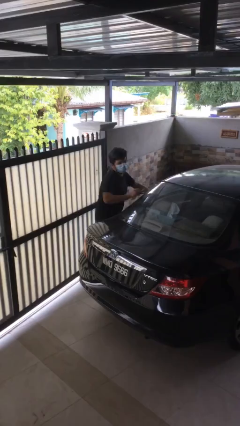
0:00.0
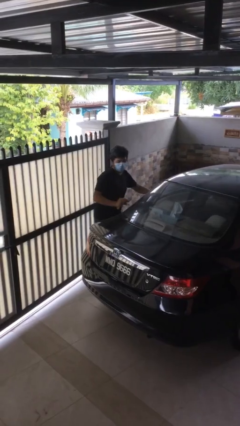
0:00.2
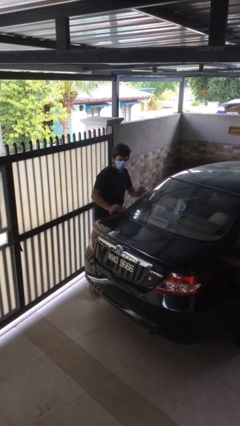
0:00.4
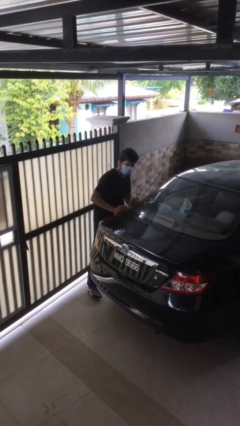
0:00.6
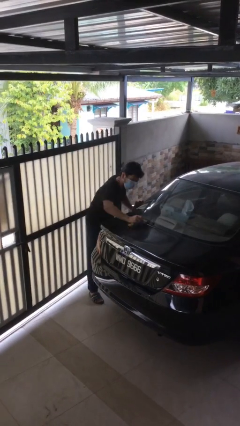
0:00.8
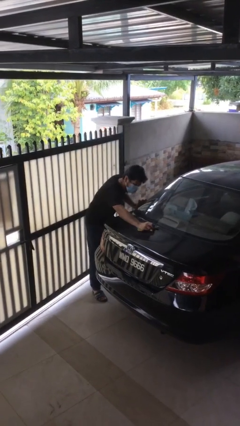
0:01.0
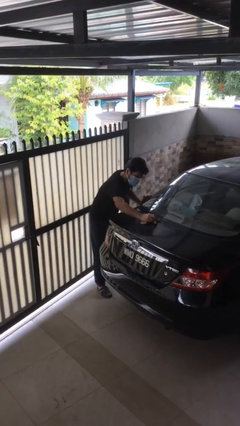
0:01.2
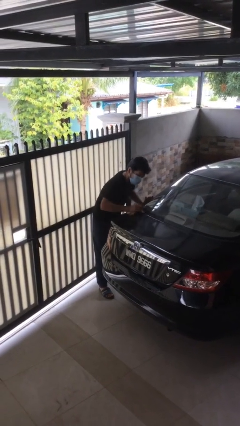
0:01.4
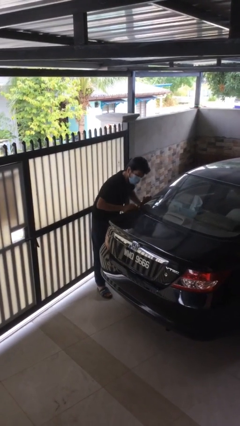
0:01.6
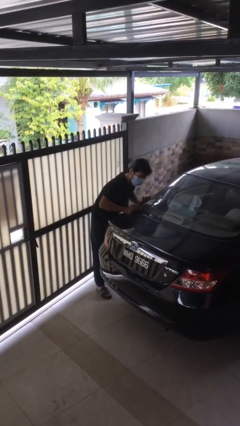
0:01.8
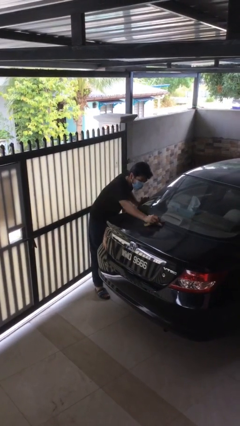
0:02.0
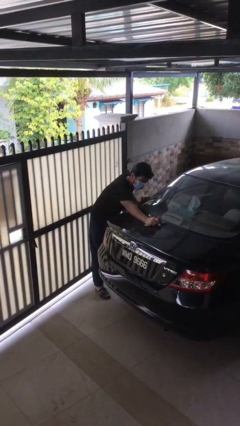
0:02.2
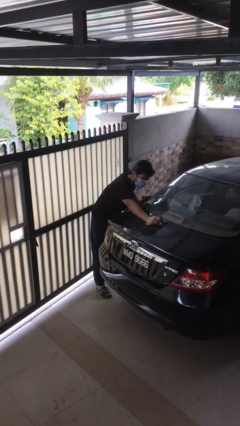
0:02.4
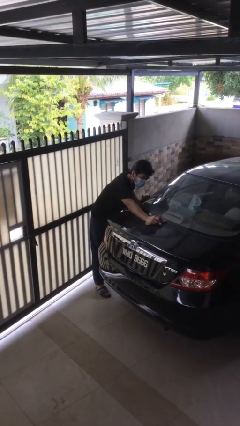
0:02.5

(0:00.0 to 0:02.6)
person polishes car with rag

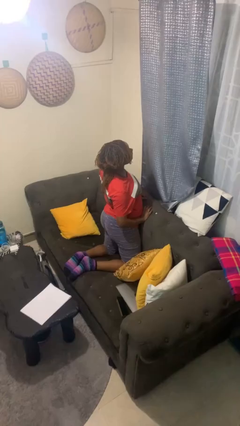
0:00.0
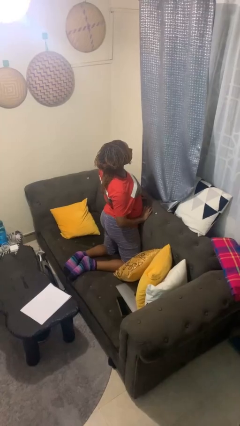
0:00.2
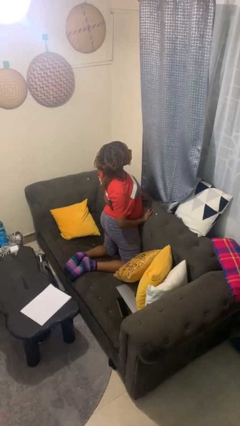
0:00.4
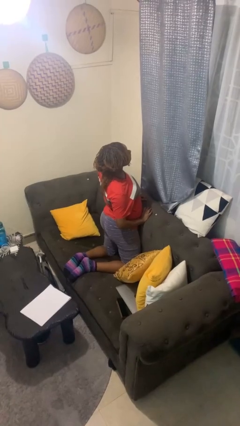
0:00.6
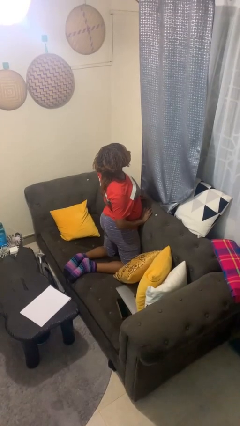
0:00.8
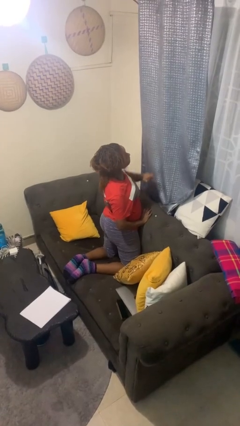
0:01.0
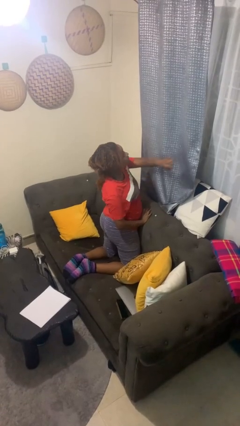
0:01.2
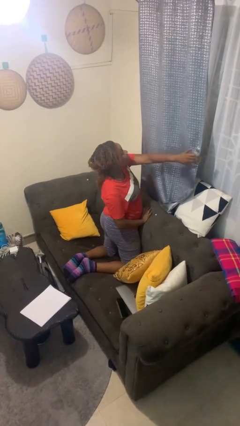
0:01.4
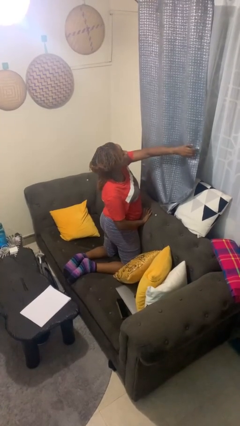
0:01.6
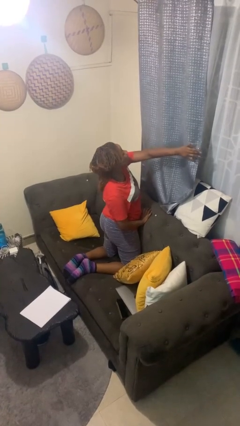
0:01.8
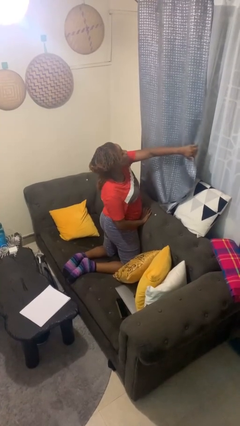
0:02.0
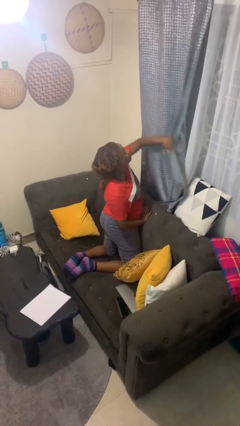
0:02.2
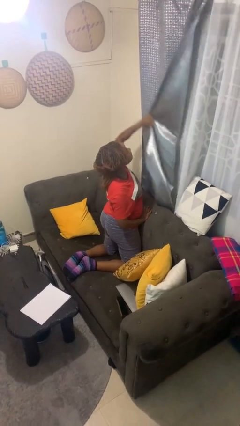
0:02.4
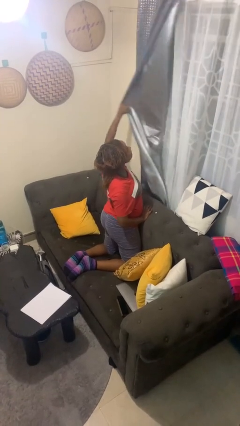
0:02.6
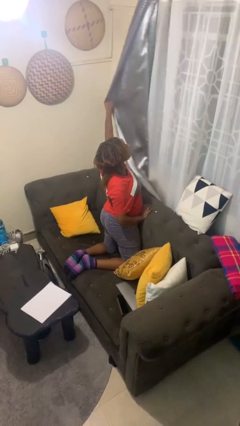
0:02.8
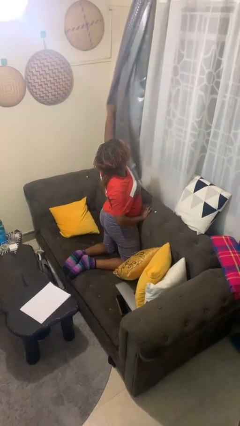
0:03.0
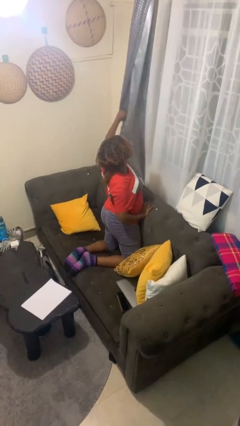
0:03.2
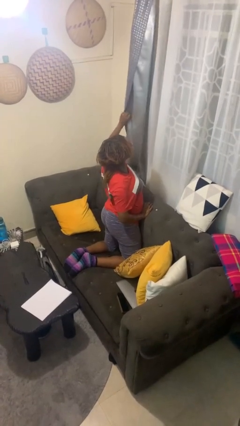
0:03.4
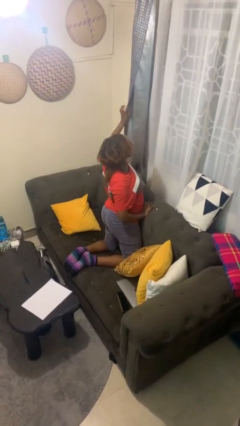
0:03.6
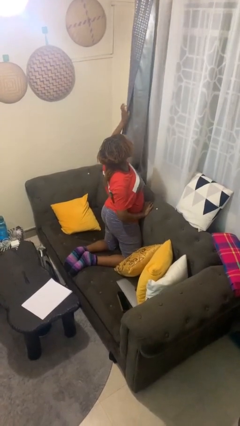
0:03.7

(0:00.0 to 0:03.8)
person opens curtains

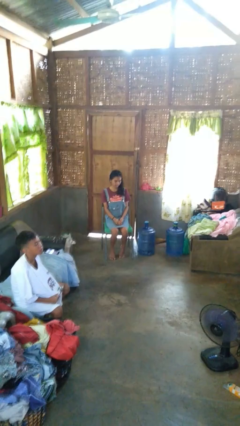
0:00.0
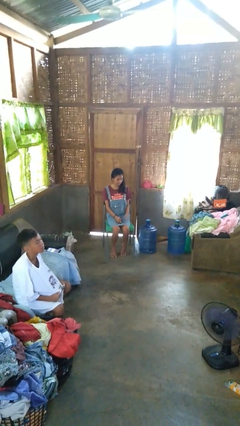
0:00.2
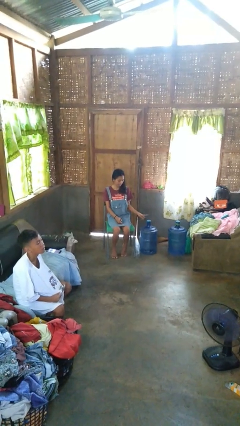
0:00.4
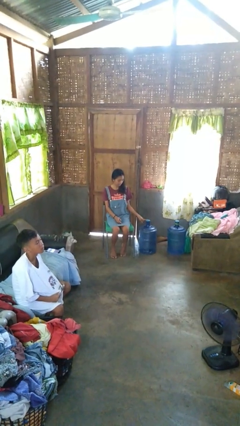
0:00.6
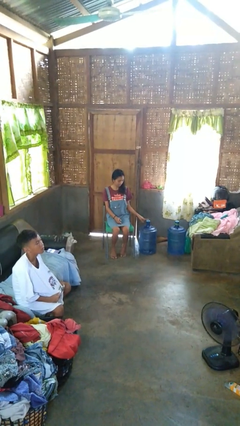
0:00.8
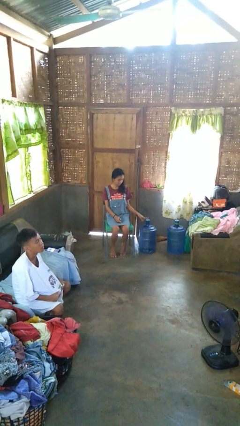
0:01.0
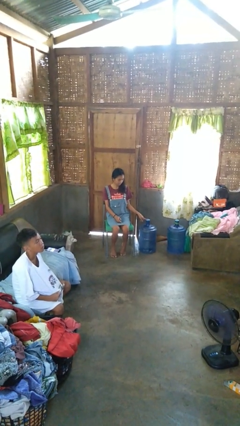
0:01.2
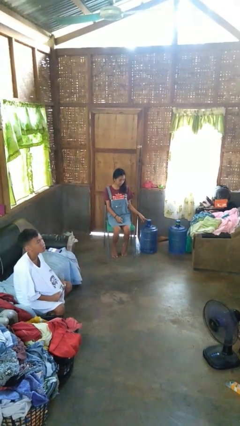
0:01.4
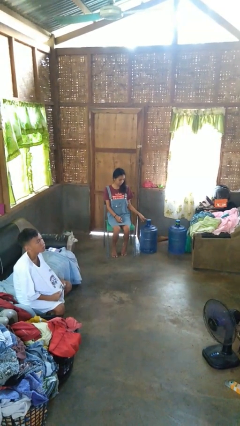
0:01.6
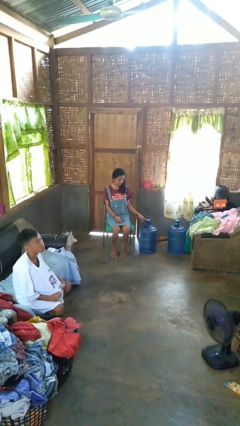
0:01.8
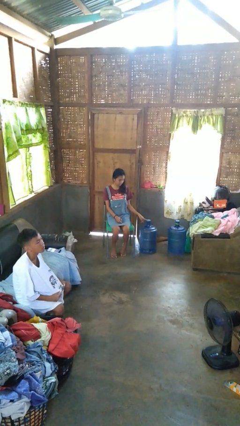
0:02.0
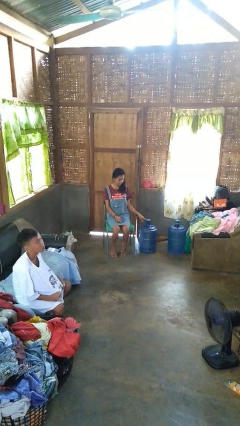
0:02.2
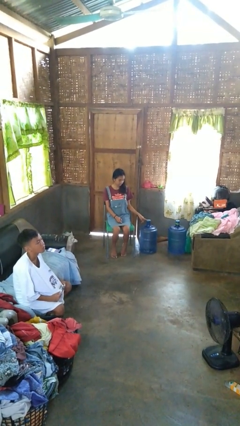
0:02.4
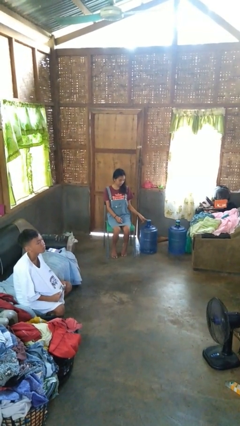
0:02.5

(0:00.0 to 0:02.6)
person taps object with finger

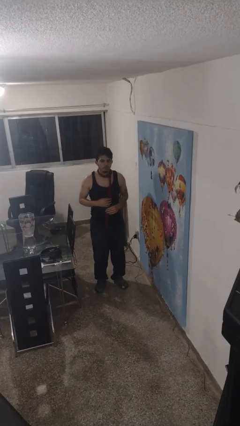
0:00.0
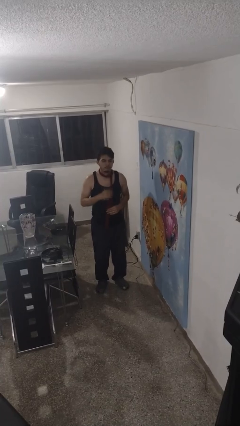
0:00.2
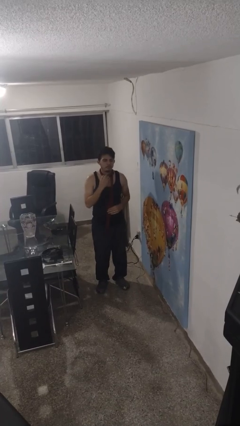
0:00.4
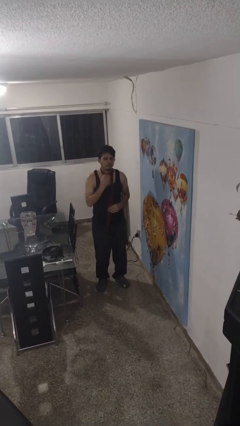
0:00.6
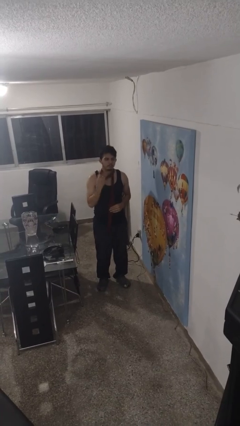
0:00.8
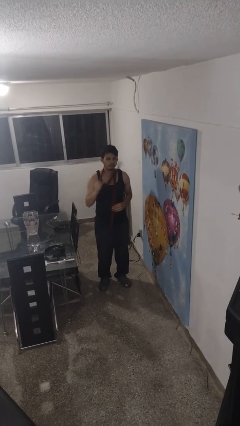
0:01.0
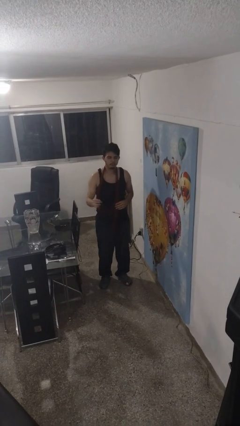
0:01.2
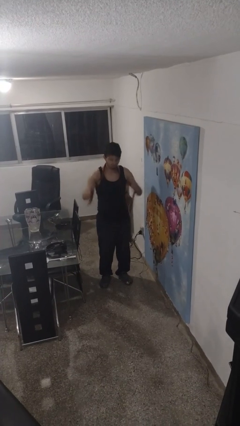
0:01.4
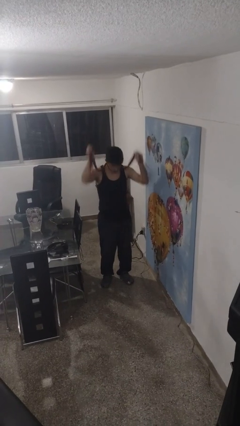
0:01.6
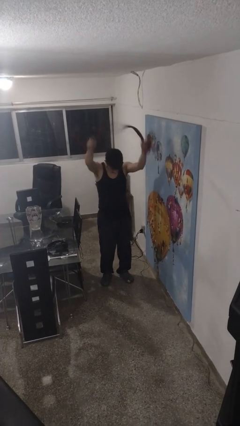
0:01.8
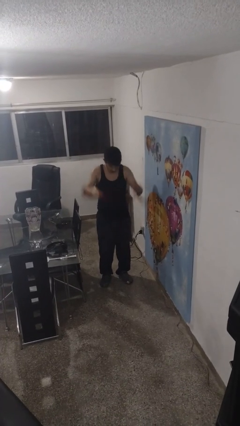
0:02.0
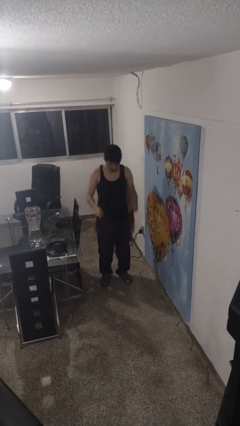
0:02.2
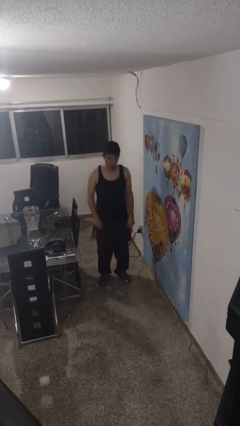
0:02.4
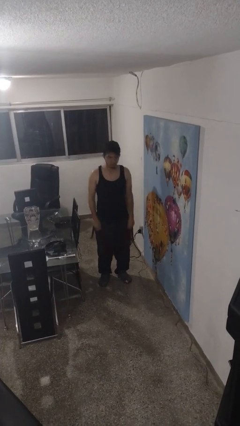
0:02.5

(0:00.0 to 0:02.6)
person takes off scarf

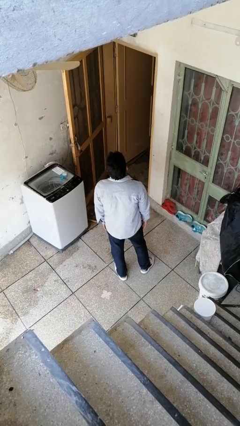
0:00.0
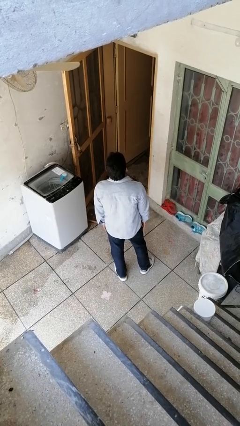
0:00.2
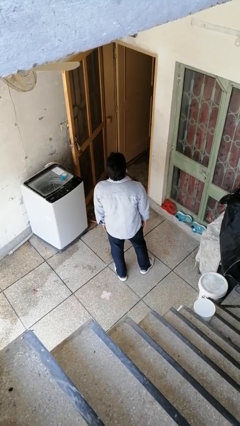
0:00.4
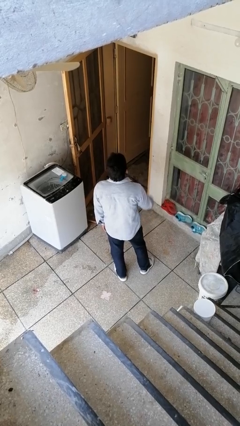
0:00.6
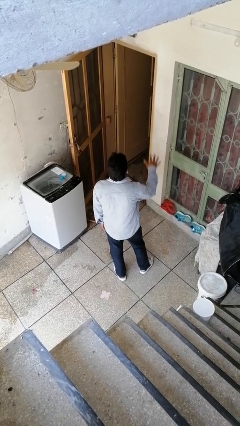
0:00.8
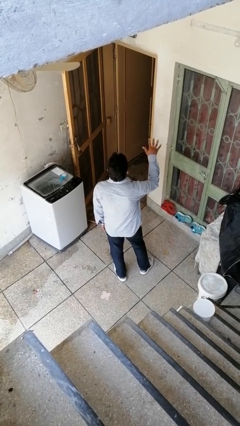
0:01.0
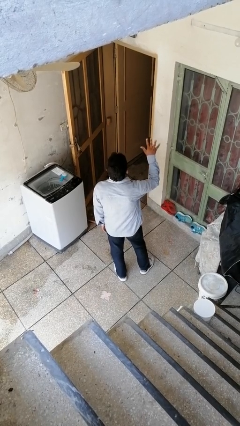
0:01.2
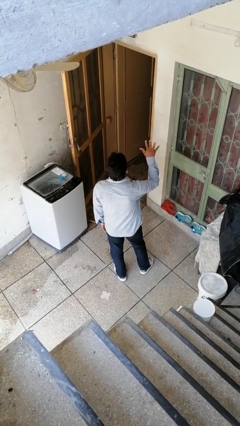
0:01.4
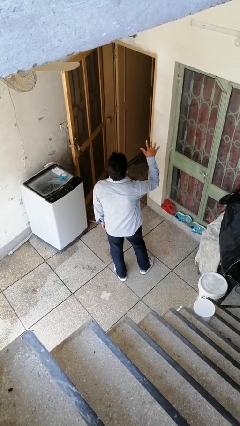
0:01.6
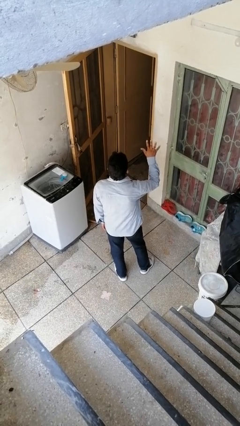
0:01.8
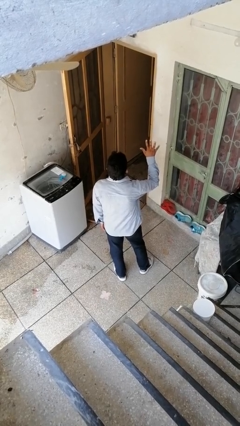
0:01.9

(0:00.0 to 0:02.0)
person gestures number five

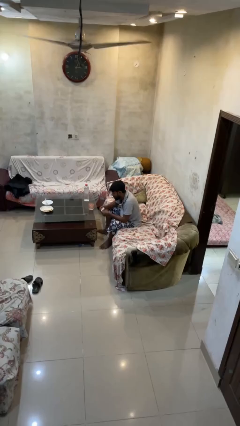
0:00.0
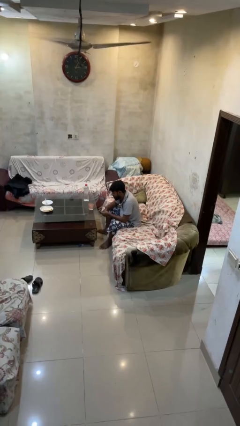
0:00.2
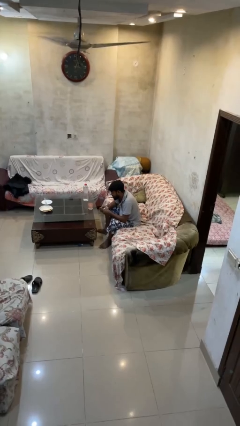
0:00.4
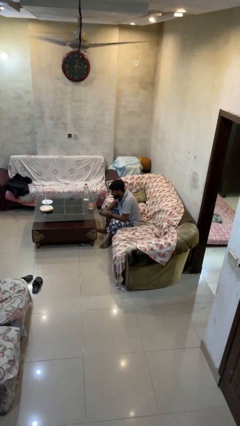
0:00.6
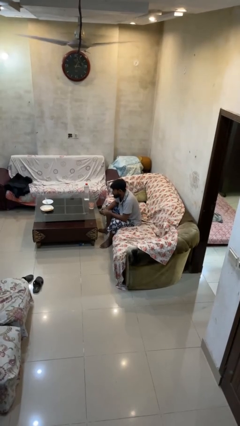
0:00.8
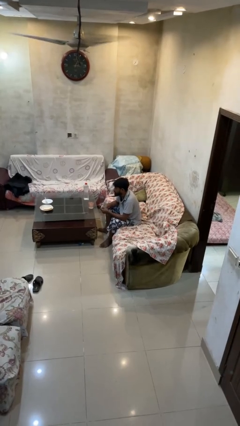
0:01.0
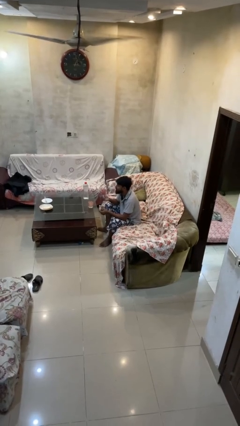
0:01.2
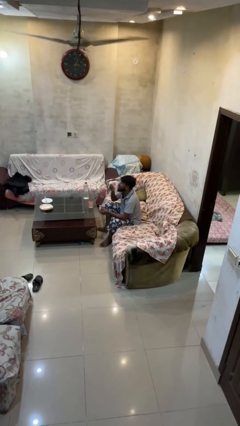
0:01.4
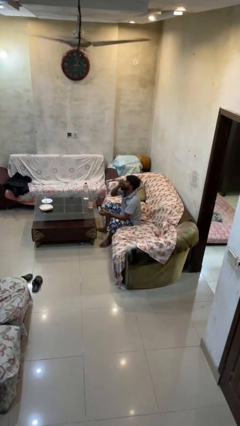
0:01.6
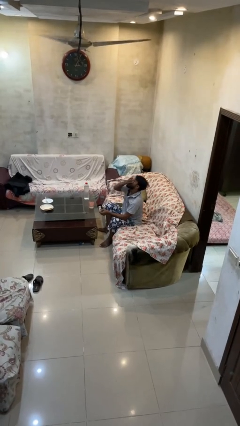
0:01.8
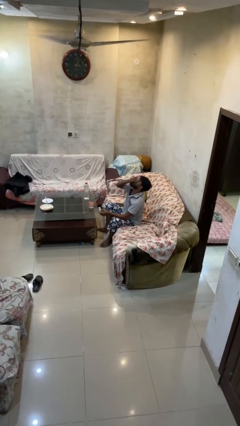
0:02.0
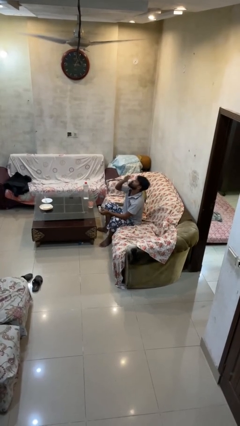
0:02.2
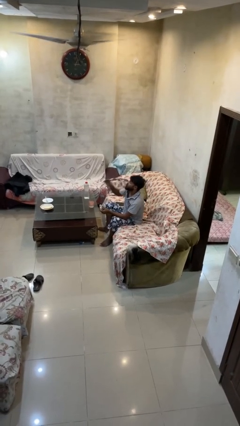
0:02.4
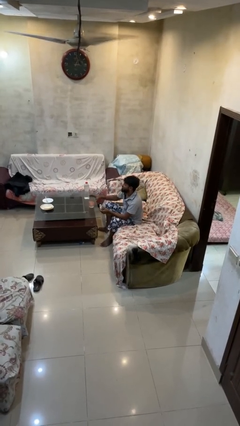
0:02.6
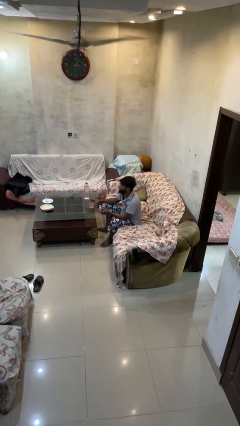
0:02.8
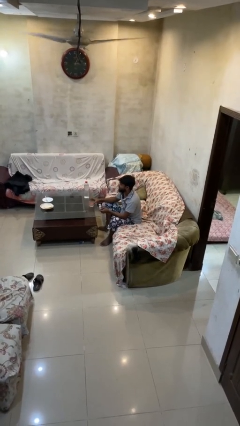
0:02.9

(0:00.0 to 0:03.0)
person takes medicine pills

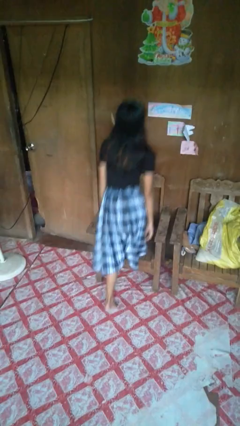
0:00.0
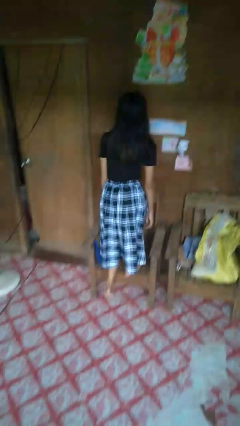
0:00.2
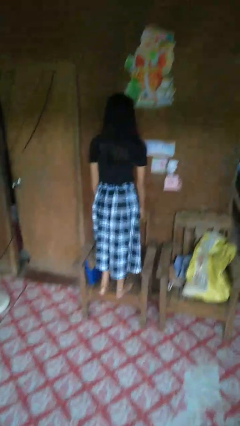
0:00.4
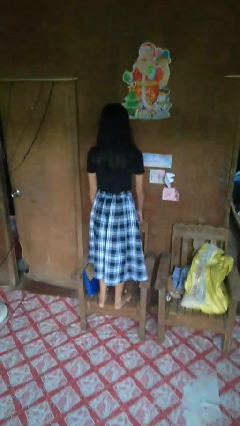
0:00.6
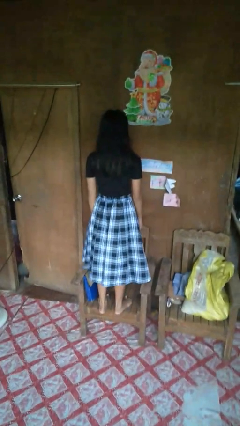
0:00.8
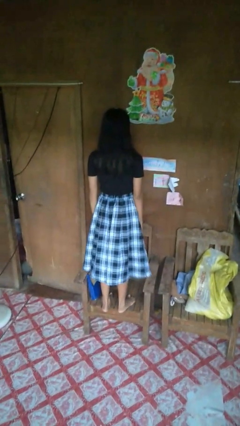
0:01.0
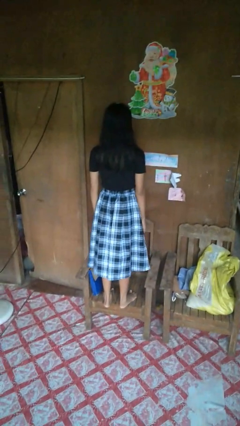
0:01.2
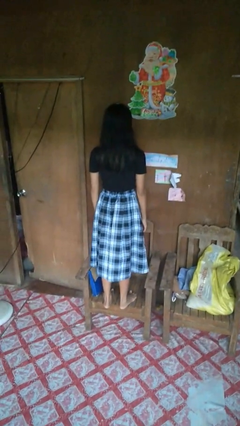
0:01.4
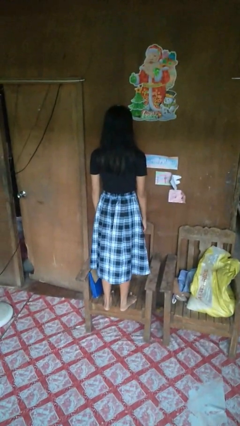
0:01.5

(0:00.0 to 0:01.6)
person climbs on chair
